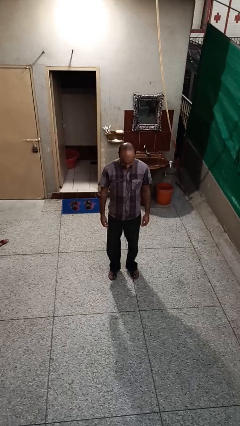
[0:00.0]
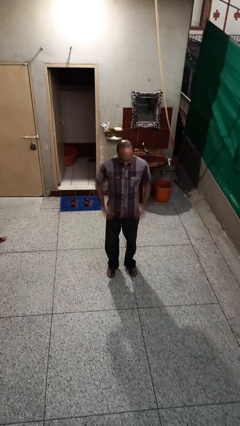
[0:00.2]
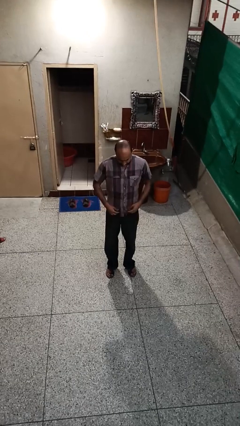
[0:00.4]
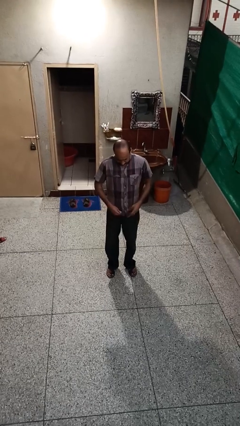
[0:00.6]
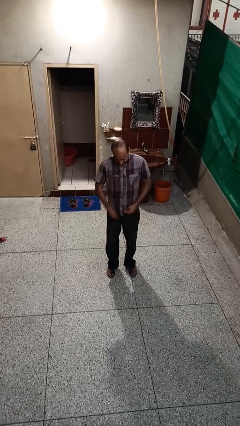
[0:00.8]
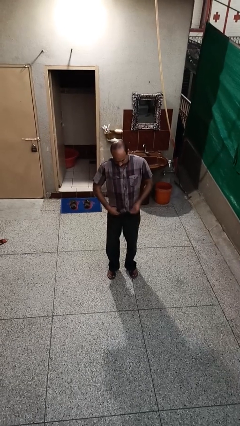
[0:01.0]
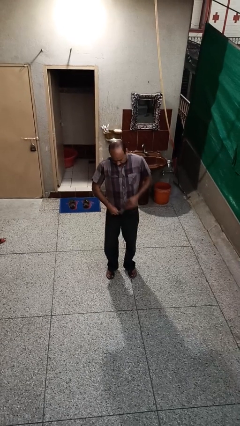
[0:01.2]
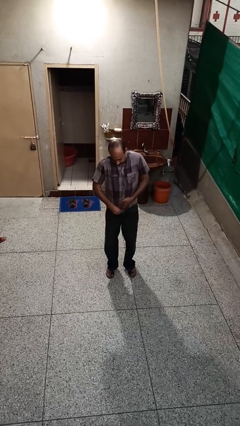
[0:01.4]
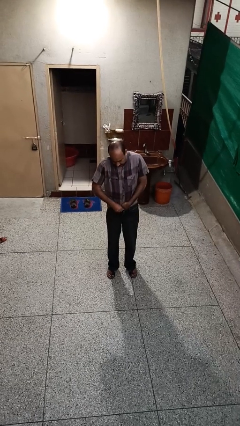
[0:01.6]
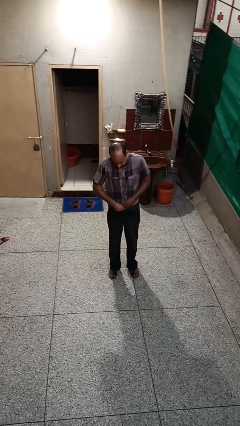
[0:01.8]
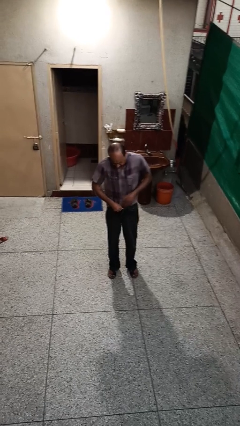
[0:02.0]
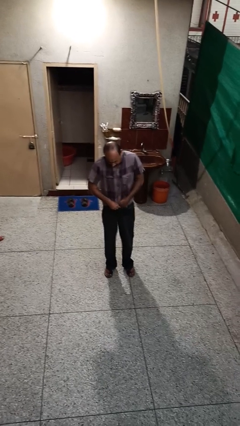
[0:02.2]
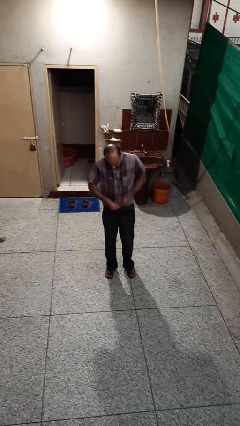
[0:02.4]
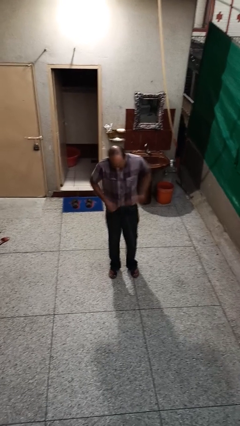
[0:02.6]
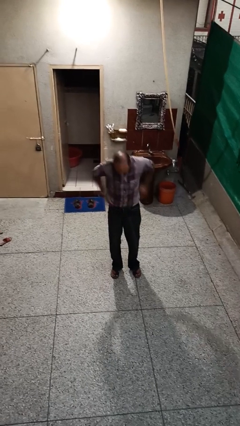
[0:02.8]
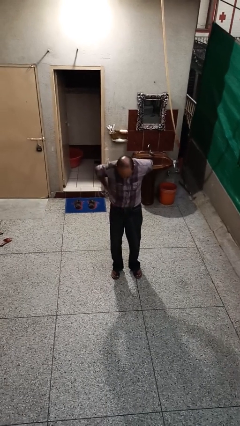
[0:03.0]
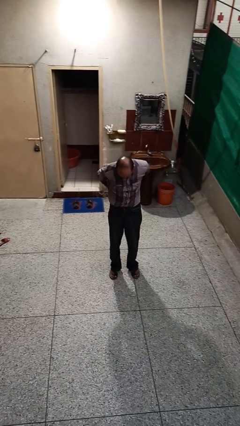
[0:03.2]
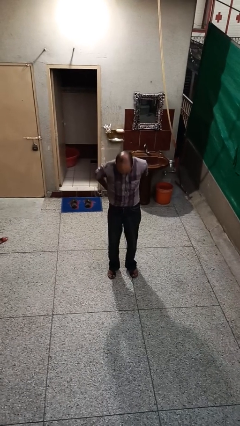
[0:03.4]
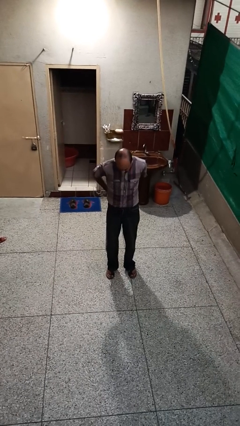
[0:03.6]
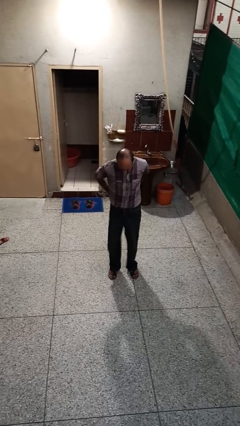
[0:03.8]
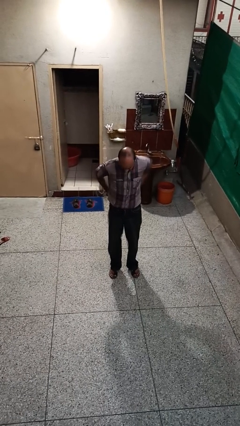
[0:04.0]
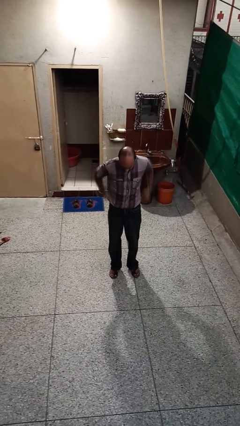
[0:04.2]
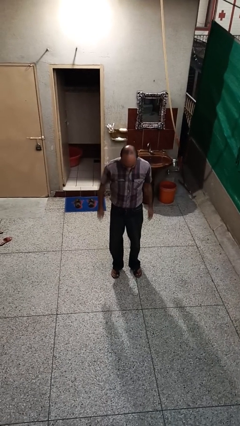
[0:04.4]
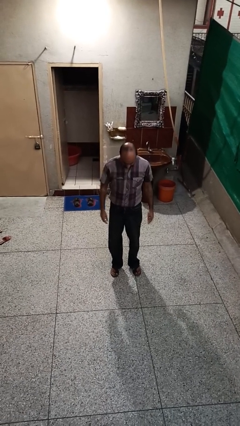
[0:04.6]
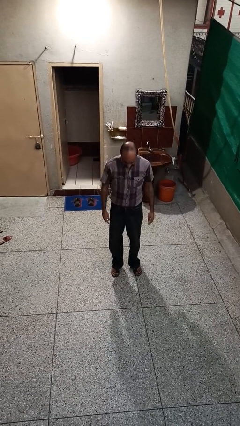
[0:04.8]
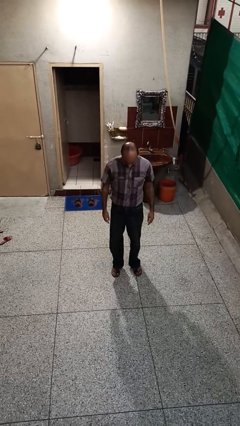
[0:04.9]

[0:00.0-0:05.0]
person tucks in shirt

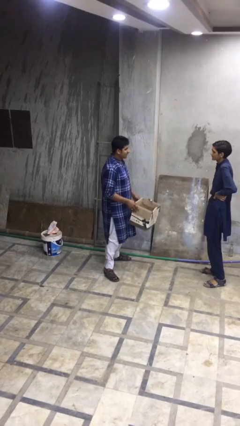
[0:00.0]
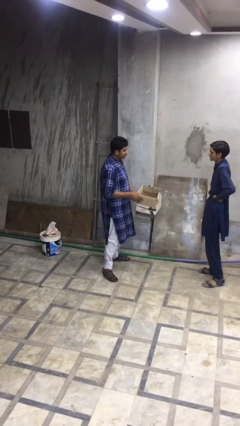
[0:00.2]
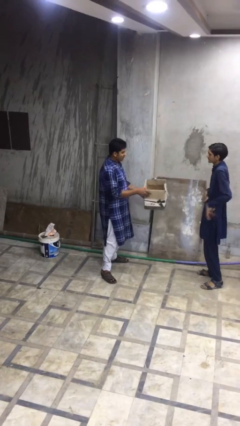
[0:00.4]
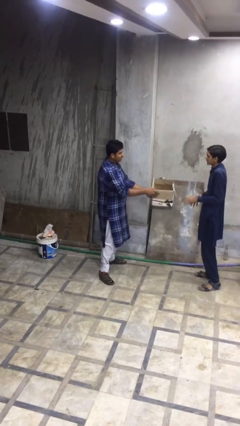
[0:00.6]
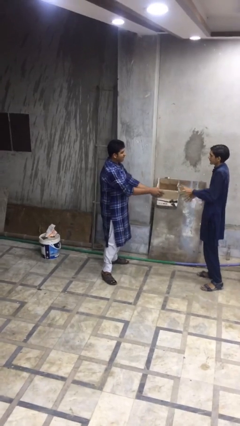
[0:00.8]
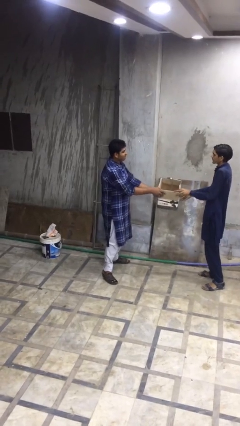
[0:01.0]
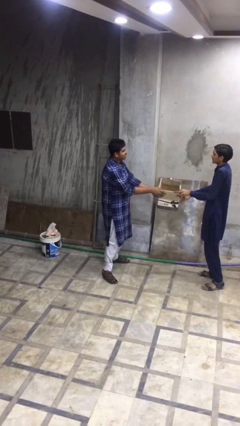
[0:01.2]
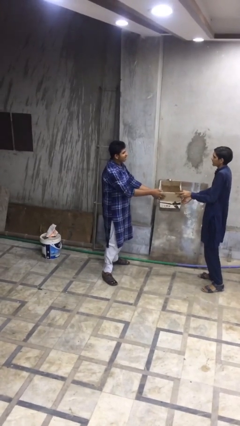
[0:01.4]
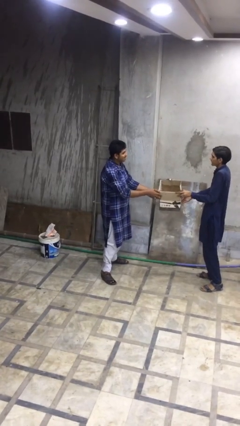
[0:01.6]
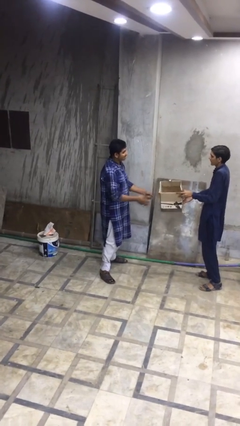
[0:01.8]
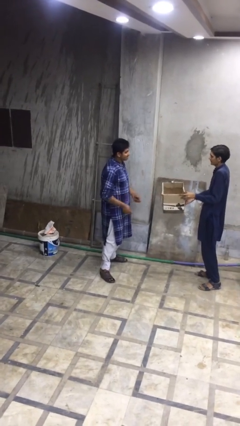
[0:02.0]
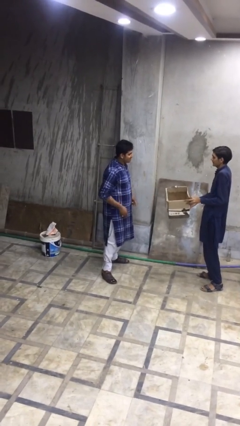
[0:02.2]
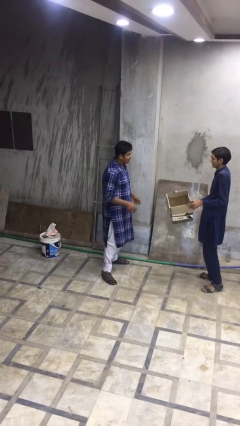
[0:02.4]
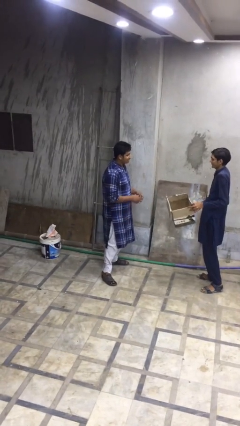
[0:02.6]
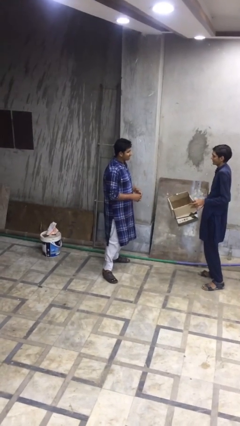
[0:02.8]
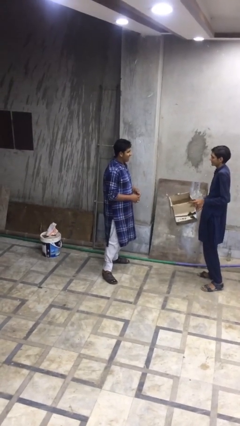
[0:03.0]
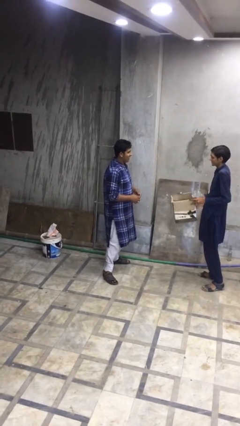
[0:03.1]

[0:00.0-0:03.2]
person transfers object to person

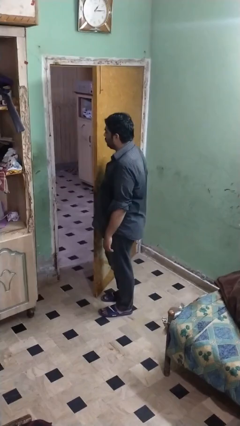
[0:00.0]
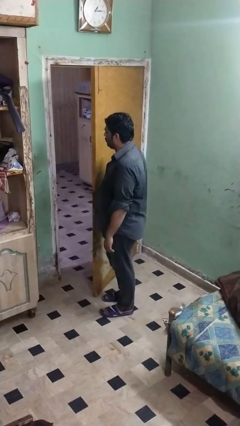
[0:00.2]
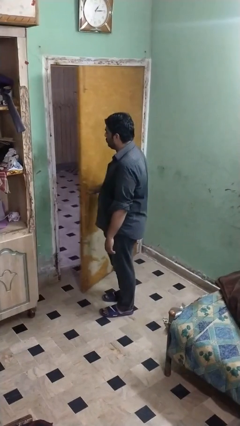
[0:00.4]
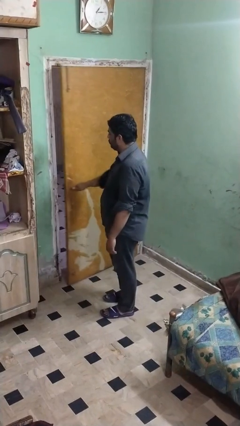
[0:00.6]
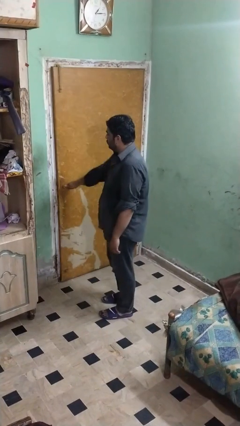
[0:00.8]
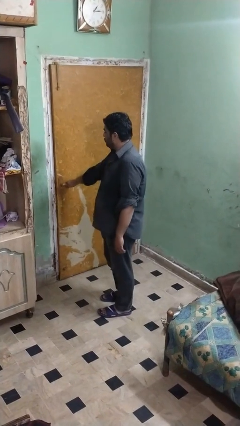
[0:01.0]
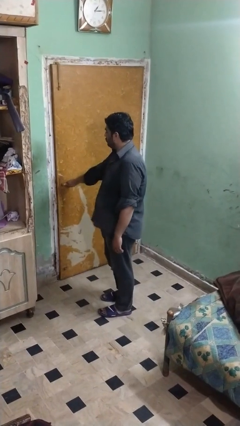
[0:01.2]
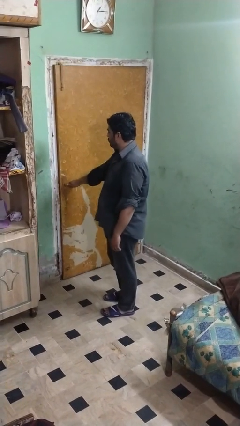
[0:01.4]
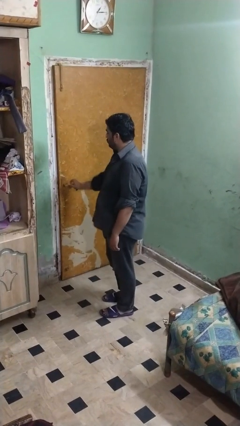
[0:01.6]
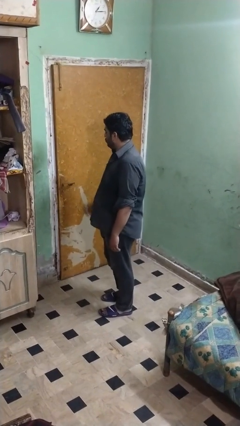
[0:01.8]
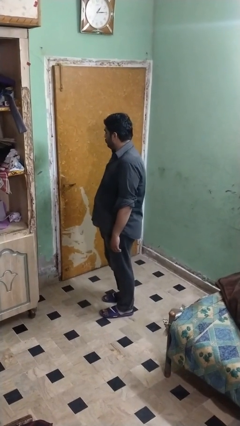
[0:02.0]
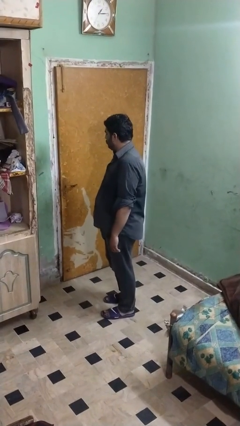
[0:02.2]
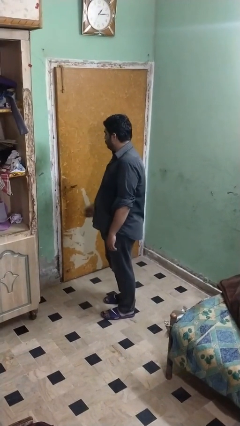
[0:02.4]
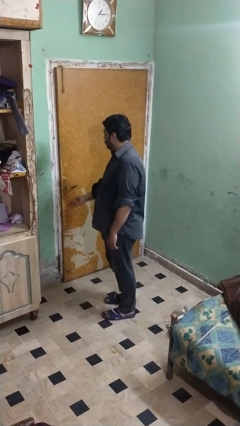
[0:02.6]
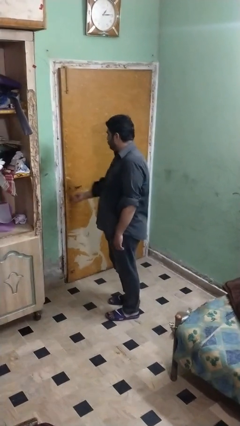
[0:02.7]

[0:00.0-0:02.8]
person closes facility door

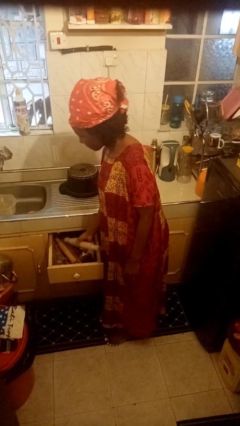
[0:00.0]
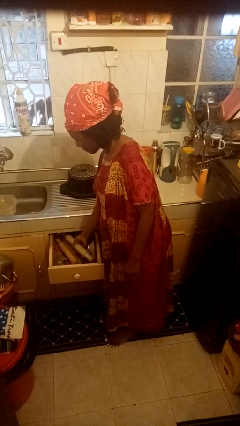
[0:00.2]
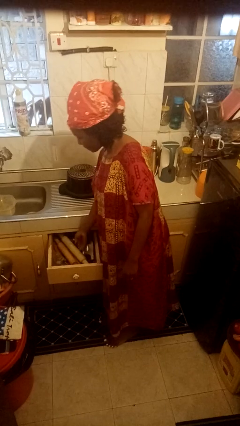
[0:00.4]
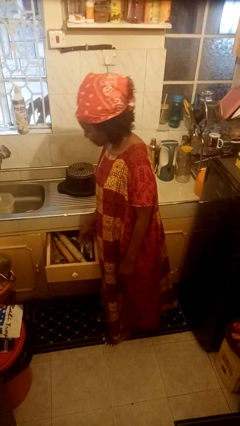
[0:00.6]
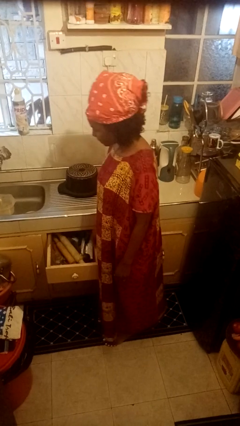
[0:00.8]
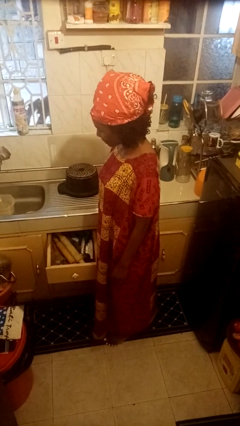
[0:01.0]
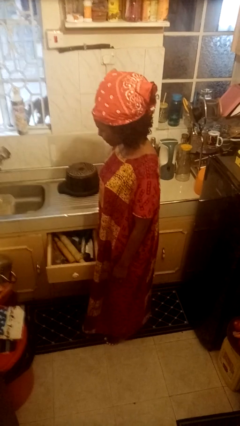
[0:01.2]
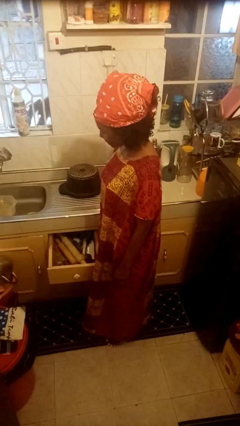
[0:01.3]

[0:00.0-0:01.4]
person puts object into kitchen drawer

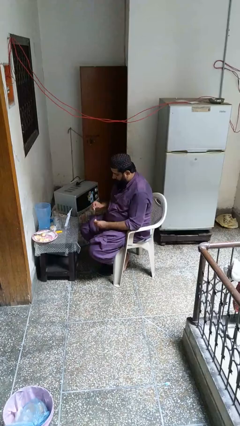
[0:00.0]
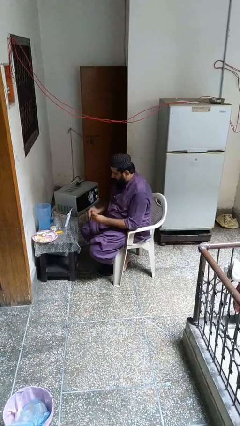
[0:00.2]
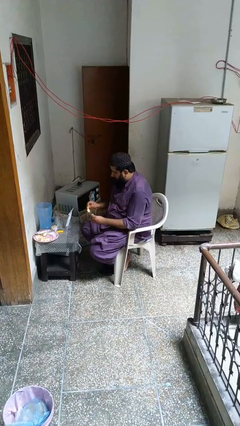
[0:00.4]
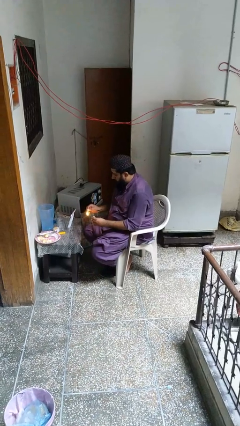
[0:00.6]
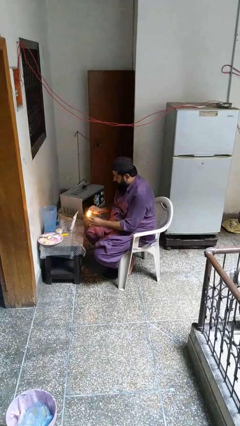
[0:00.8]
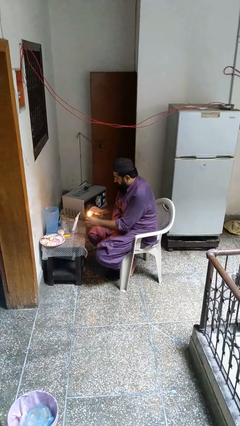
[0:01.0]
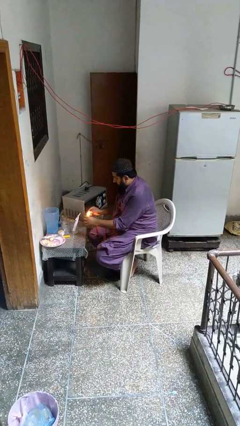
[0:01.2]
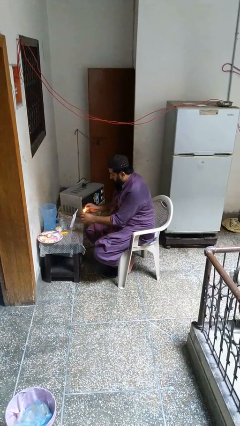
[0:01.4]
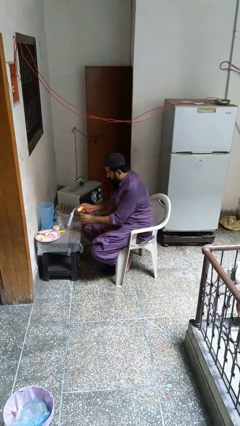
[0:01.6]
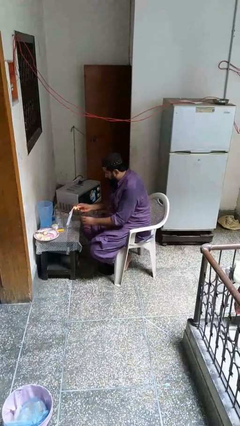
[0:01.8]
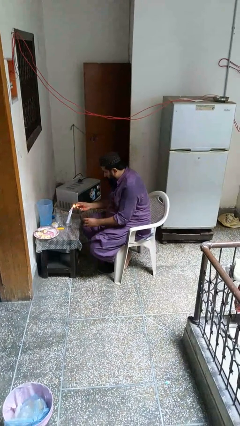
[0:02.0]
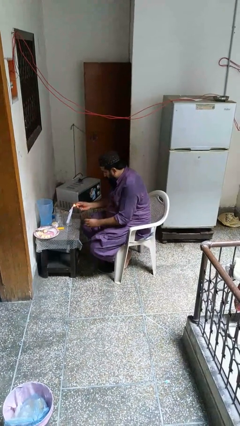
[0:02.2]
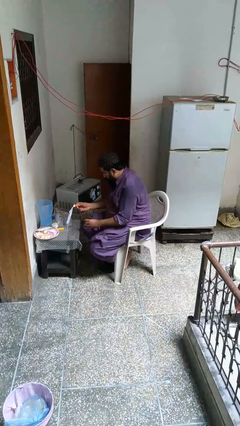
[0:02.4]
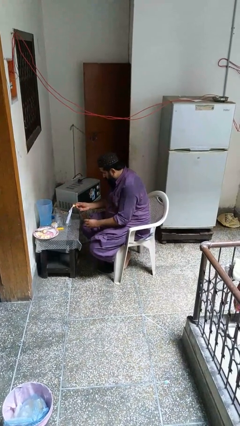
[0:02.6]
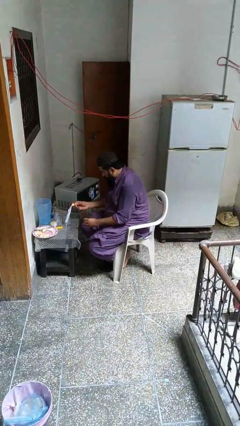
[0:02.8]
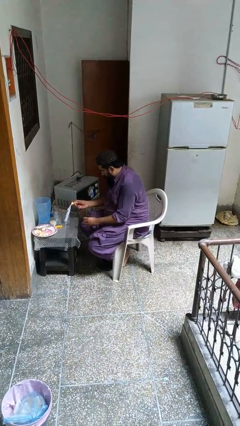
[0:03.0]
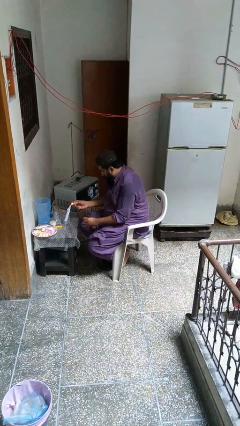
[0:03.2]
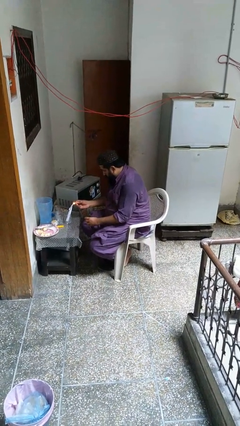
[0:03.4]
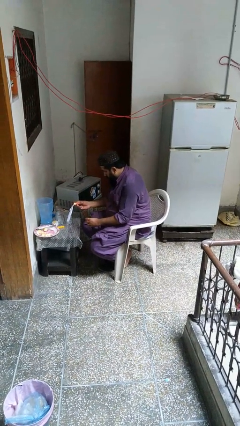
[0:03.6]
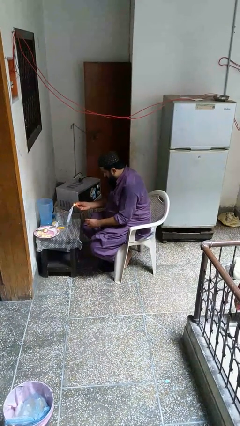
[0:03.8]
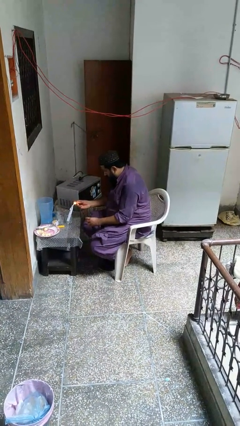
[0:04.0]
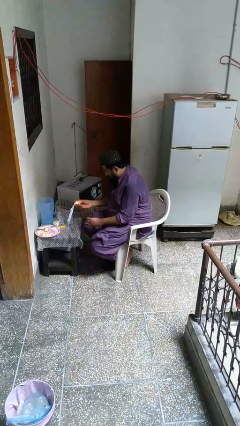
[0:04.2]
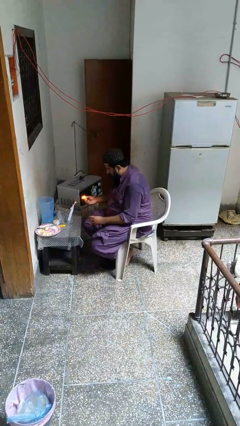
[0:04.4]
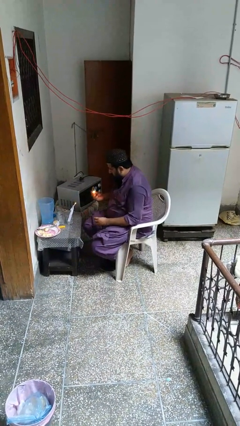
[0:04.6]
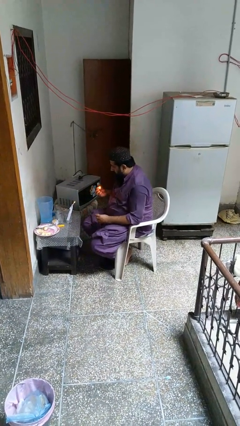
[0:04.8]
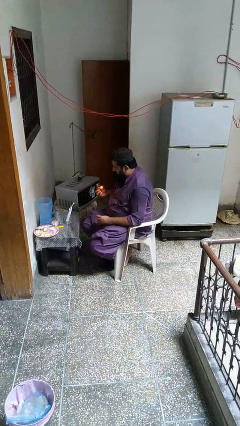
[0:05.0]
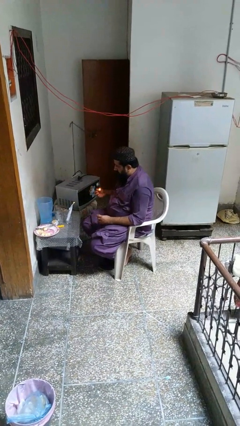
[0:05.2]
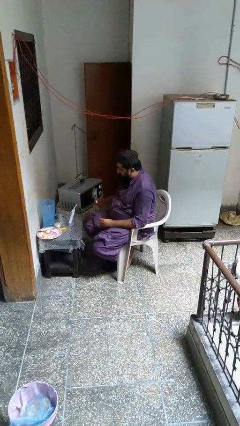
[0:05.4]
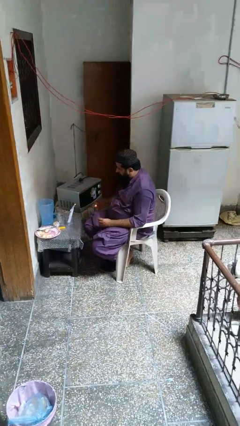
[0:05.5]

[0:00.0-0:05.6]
person lights candle
